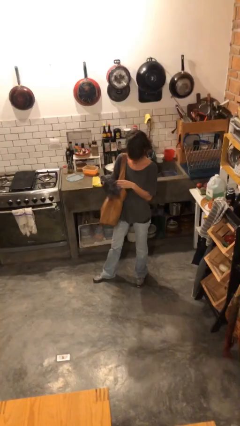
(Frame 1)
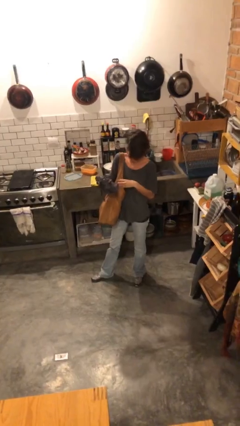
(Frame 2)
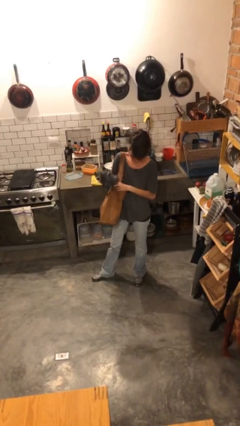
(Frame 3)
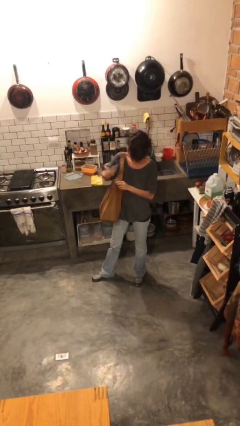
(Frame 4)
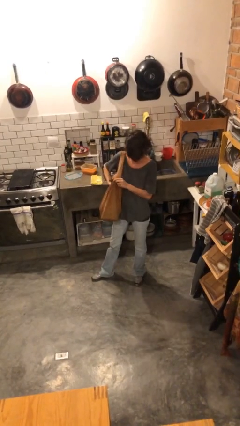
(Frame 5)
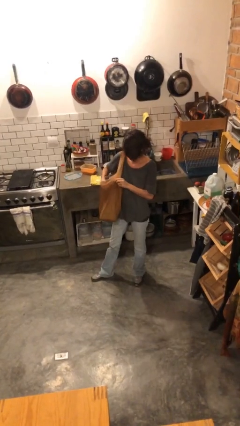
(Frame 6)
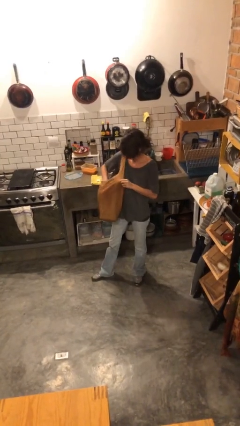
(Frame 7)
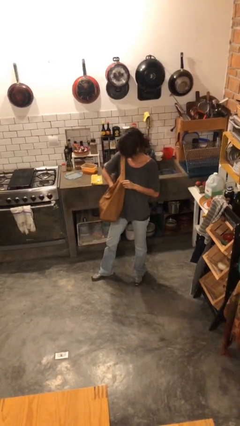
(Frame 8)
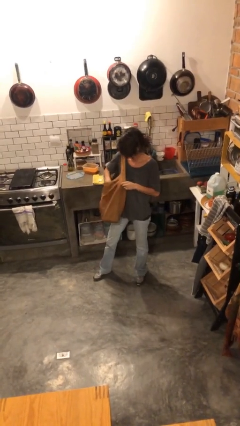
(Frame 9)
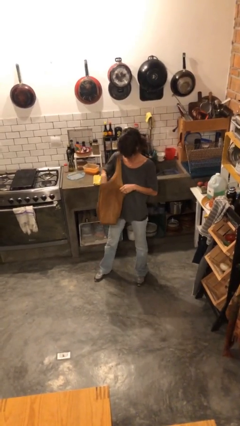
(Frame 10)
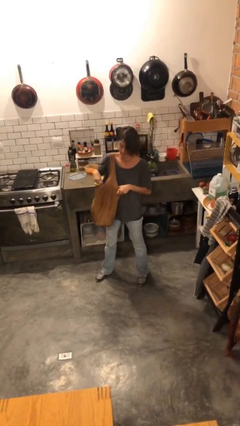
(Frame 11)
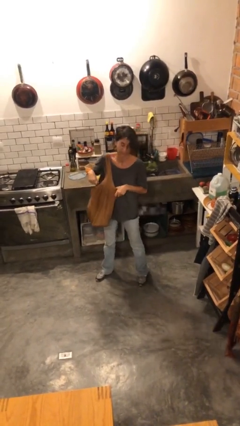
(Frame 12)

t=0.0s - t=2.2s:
person puts object into purse

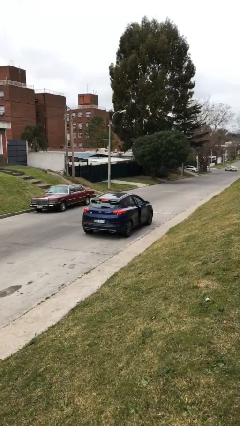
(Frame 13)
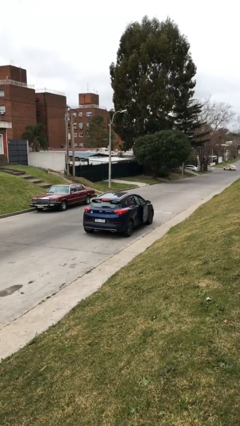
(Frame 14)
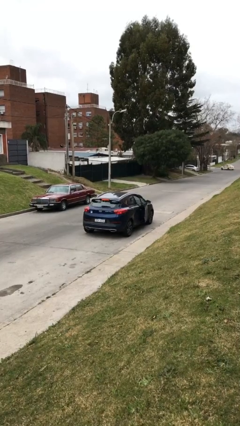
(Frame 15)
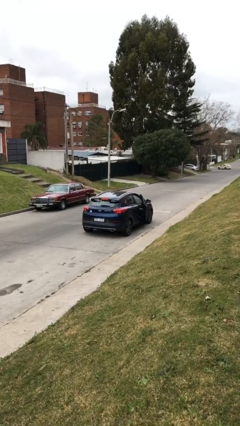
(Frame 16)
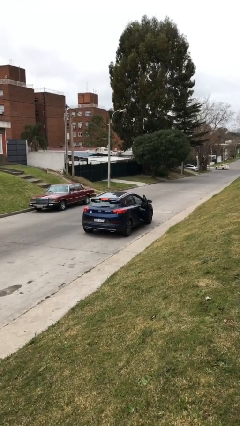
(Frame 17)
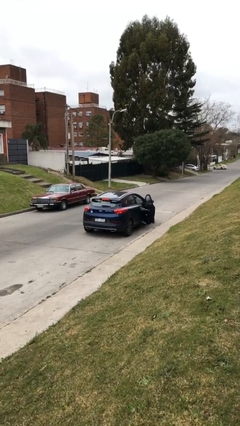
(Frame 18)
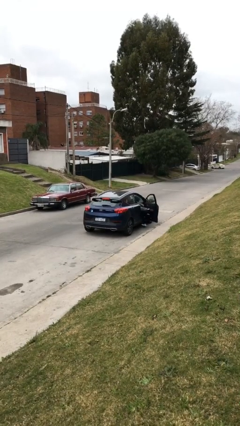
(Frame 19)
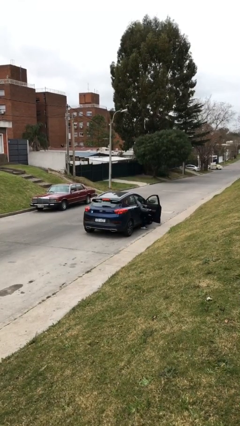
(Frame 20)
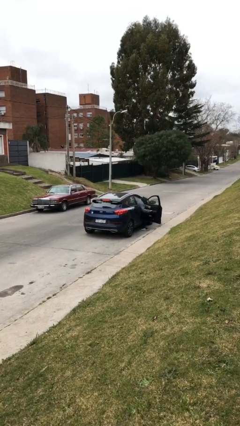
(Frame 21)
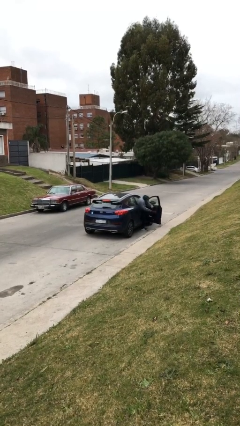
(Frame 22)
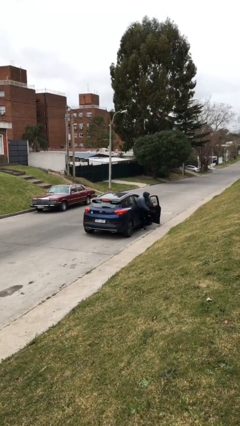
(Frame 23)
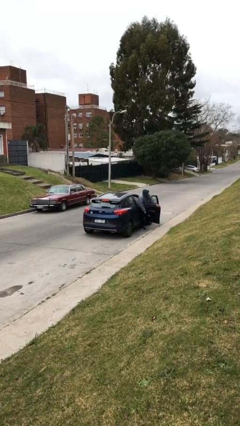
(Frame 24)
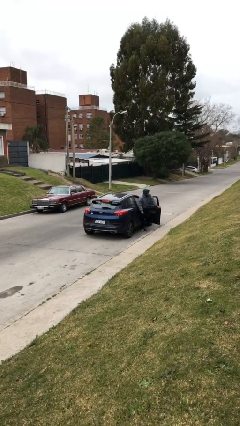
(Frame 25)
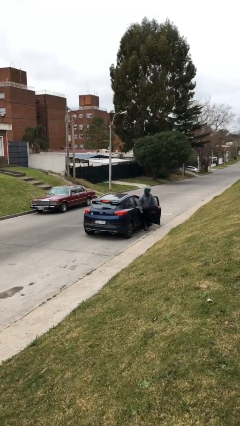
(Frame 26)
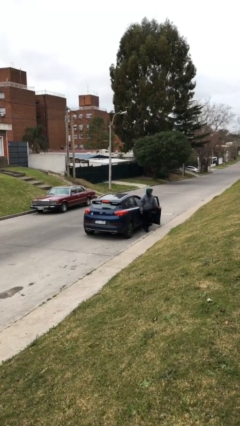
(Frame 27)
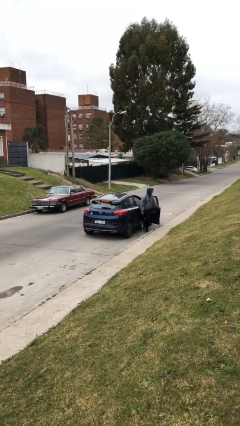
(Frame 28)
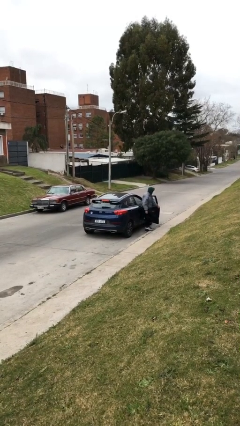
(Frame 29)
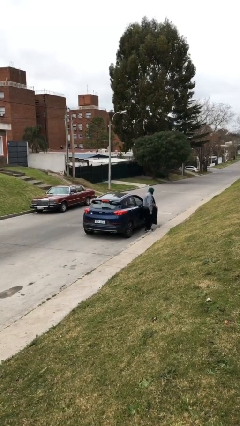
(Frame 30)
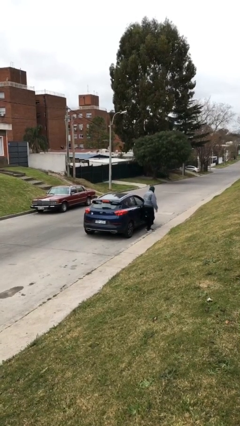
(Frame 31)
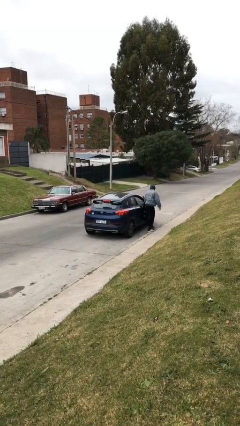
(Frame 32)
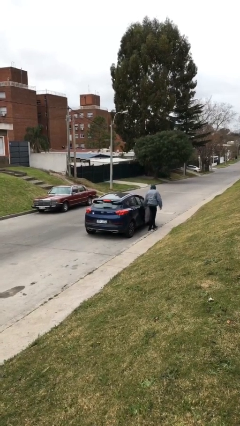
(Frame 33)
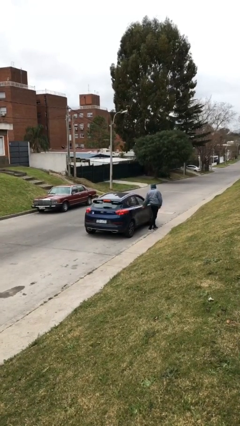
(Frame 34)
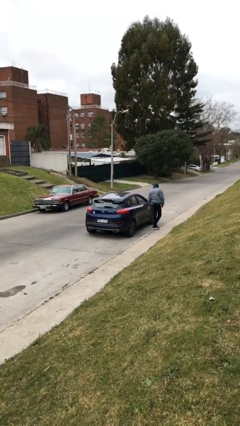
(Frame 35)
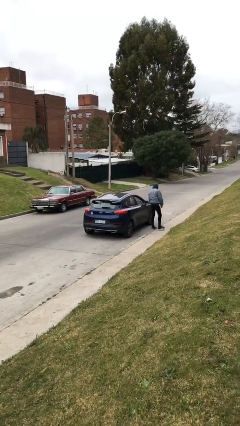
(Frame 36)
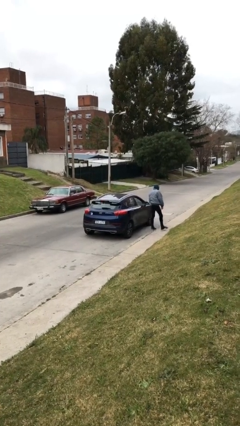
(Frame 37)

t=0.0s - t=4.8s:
car drops off person

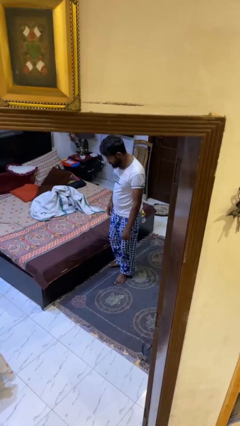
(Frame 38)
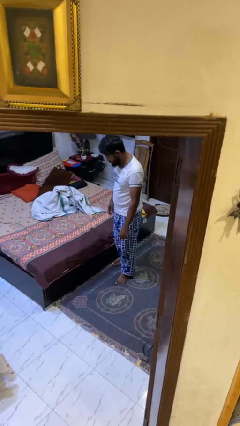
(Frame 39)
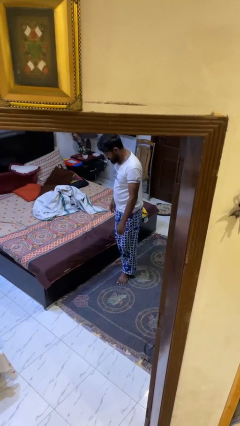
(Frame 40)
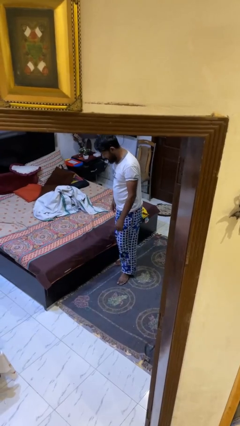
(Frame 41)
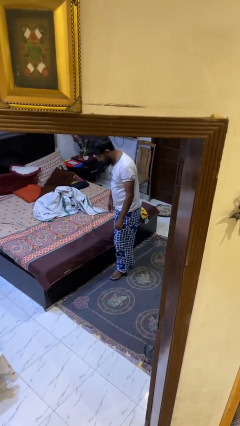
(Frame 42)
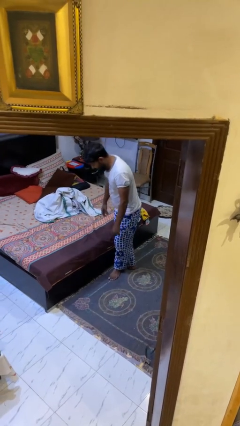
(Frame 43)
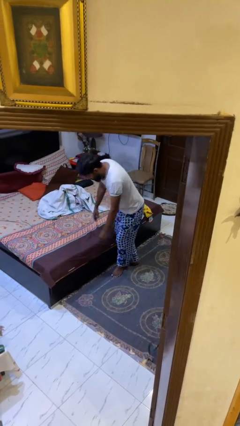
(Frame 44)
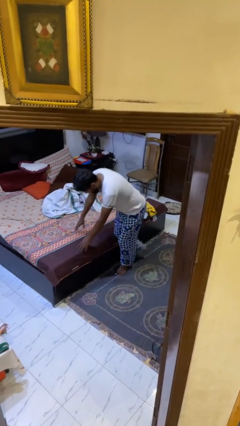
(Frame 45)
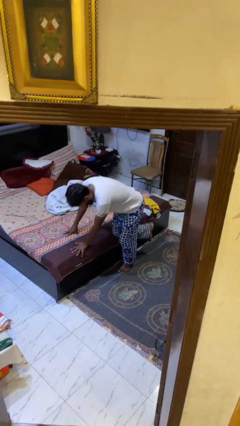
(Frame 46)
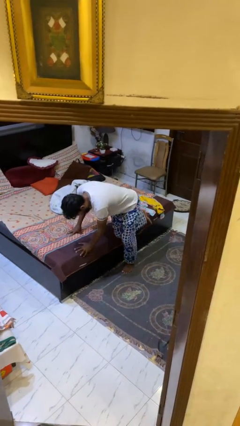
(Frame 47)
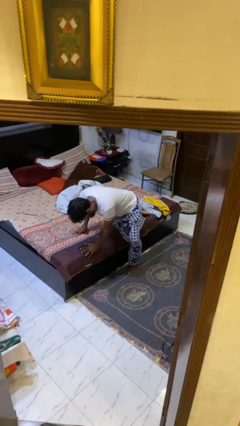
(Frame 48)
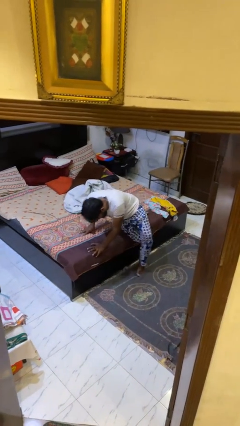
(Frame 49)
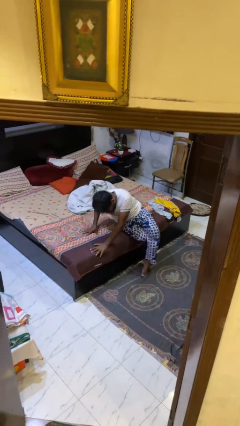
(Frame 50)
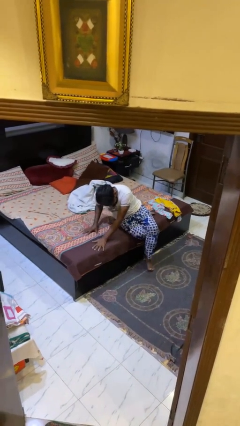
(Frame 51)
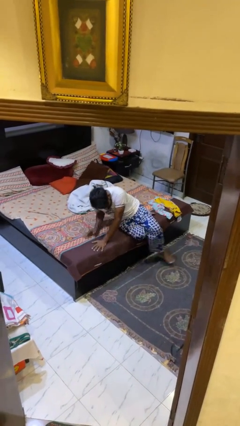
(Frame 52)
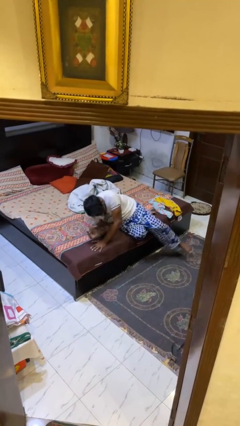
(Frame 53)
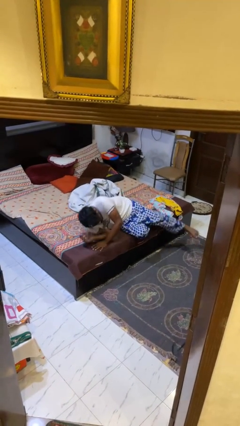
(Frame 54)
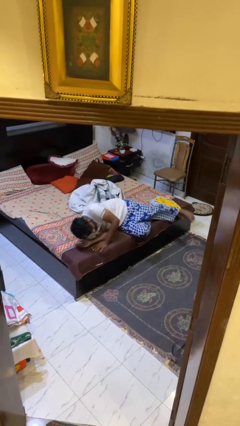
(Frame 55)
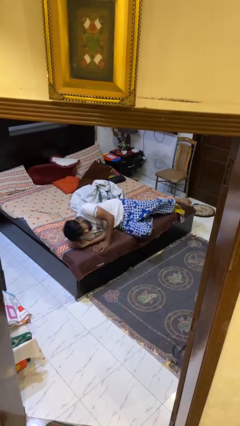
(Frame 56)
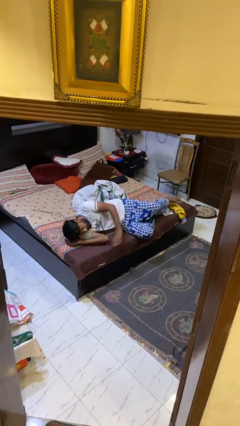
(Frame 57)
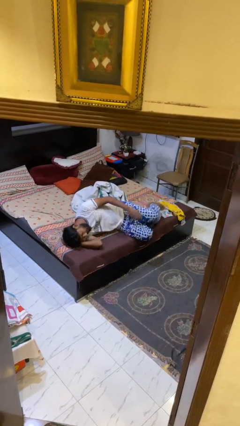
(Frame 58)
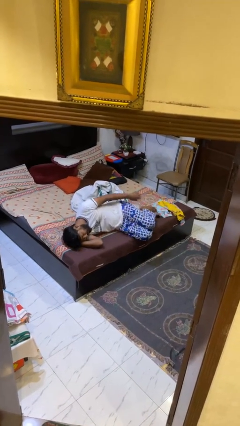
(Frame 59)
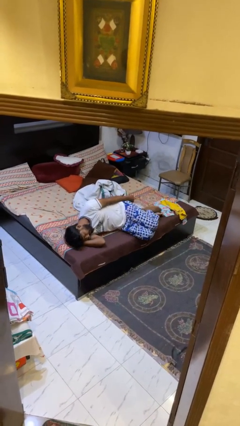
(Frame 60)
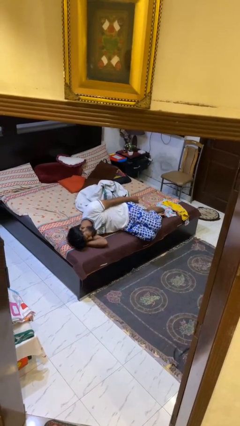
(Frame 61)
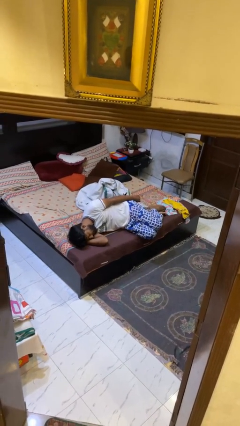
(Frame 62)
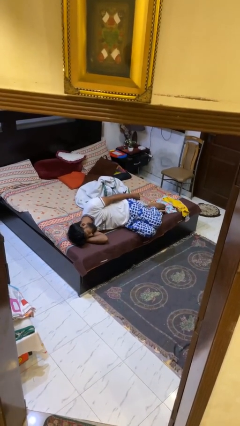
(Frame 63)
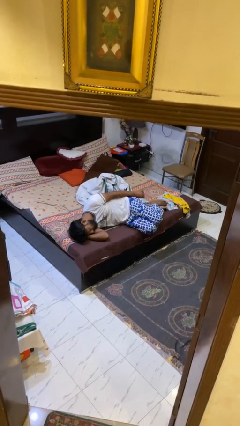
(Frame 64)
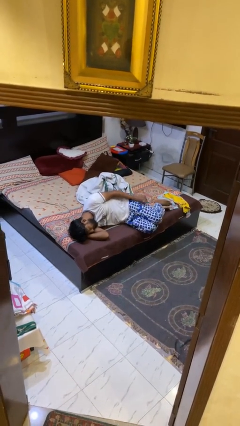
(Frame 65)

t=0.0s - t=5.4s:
person lies down on bed

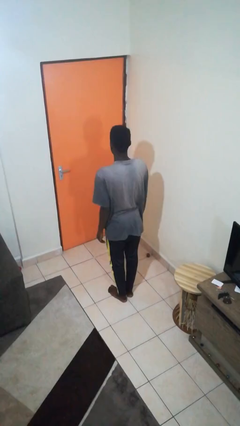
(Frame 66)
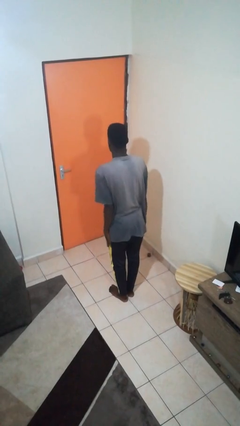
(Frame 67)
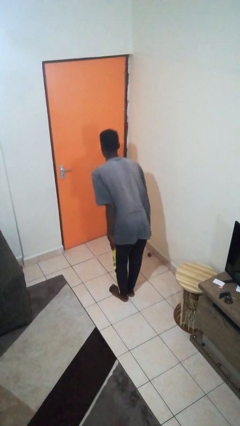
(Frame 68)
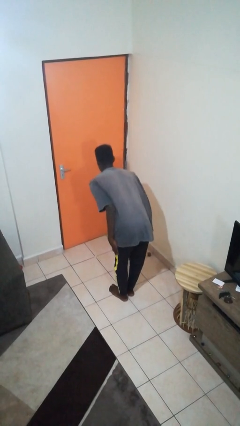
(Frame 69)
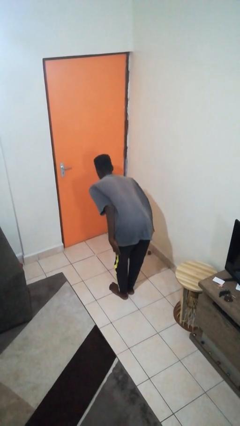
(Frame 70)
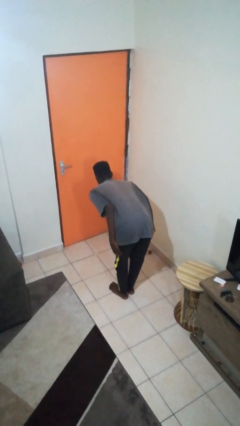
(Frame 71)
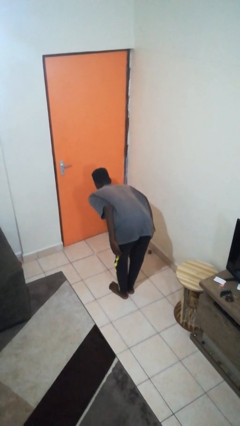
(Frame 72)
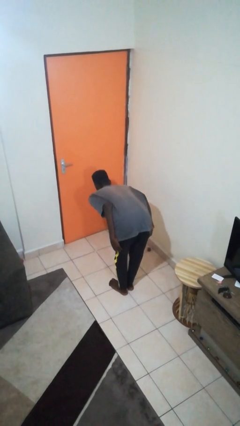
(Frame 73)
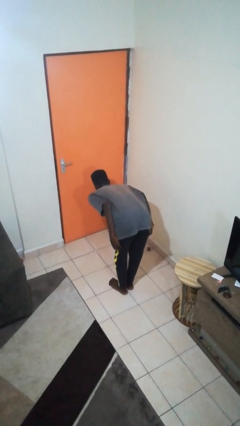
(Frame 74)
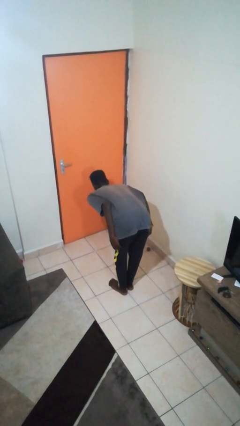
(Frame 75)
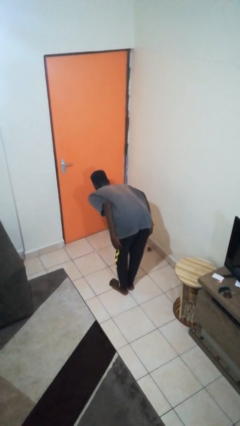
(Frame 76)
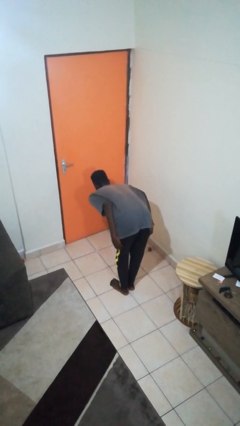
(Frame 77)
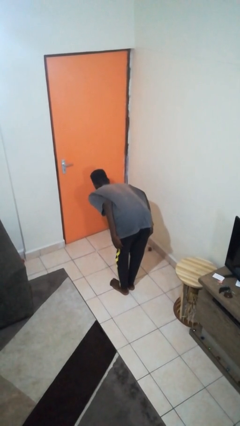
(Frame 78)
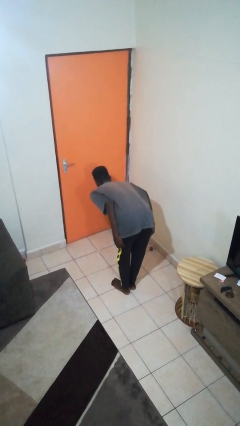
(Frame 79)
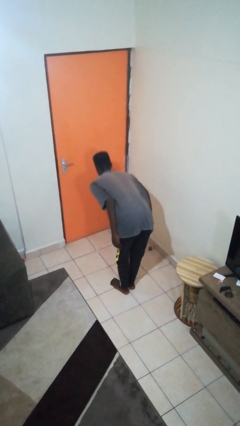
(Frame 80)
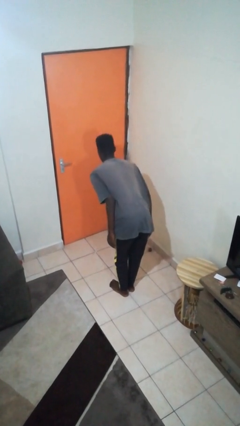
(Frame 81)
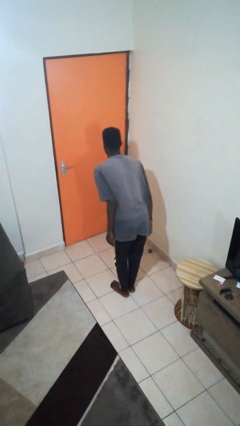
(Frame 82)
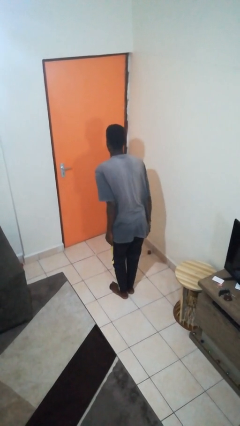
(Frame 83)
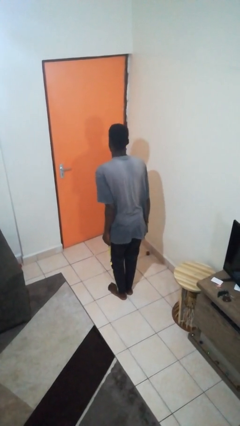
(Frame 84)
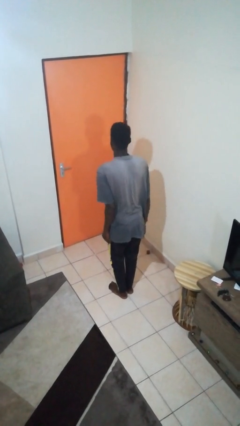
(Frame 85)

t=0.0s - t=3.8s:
person bows

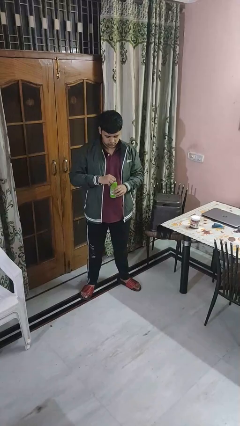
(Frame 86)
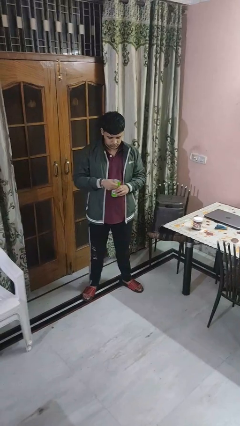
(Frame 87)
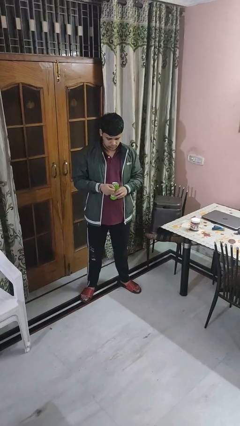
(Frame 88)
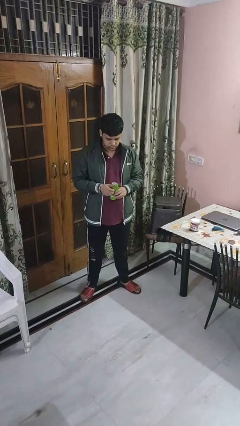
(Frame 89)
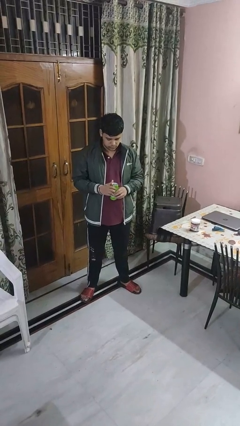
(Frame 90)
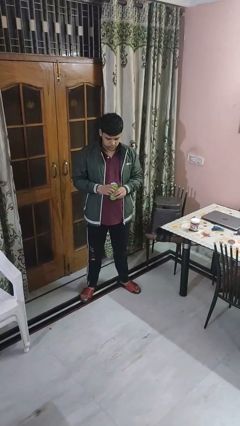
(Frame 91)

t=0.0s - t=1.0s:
person opens beverage can

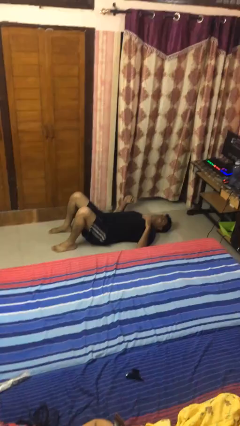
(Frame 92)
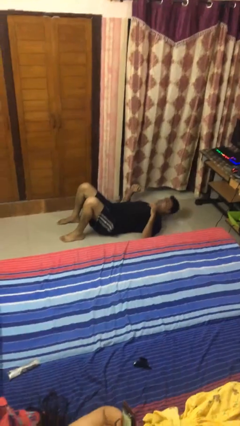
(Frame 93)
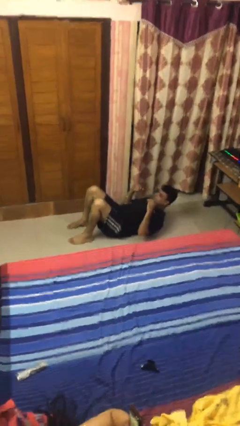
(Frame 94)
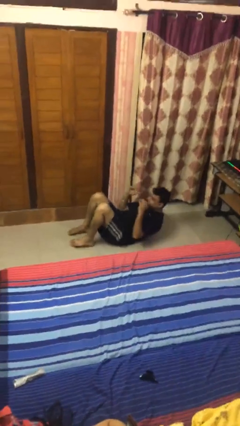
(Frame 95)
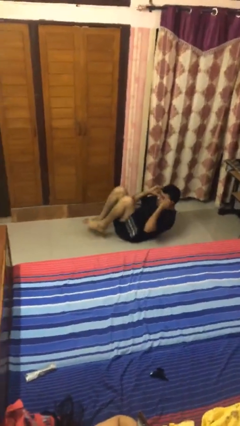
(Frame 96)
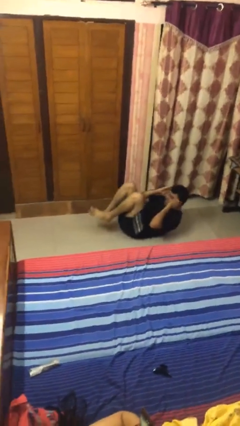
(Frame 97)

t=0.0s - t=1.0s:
person exercises with situp
